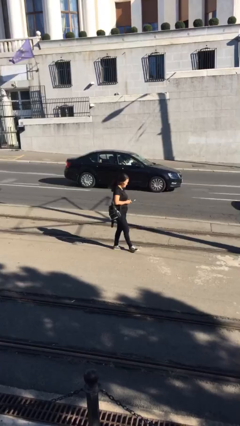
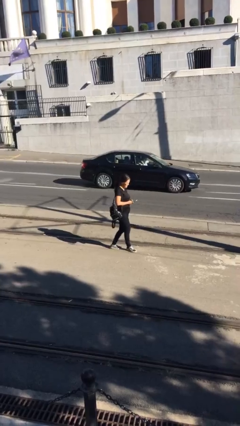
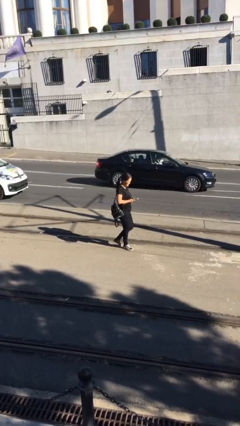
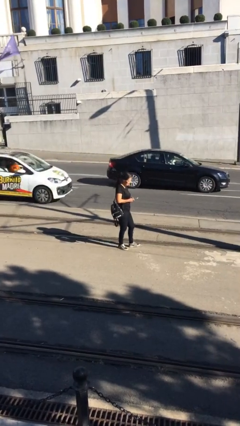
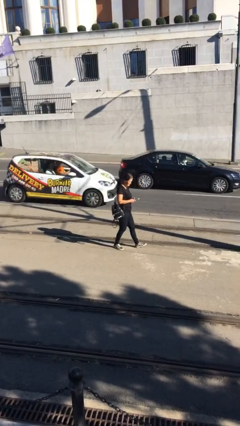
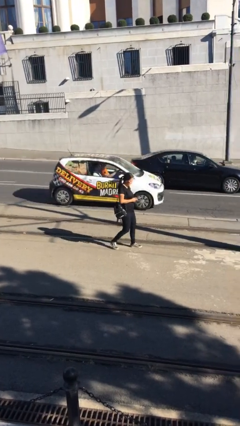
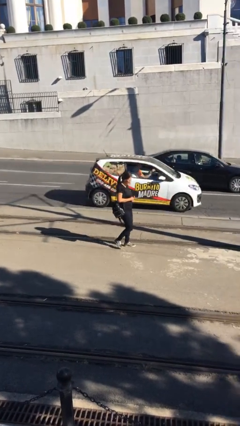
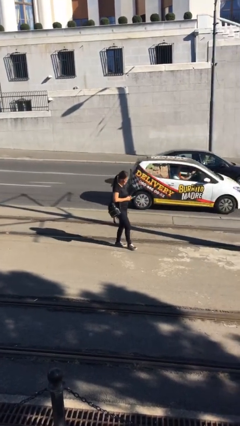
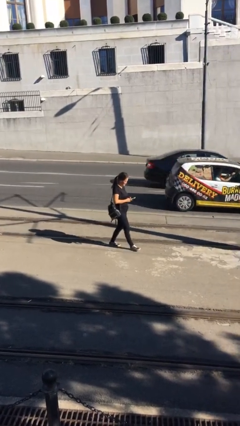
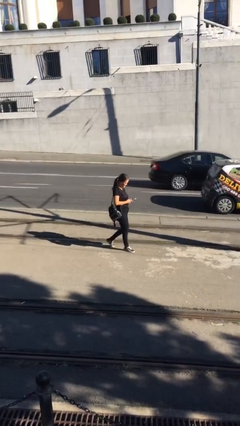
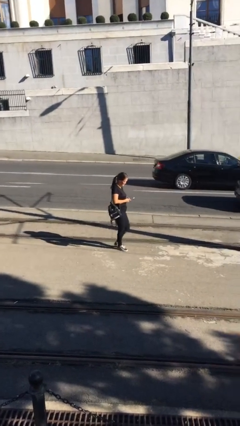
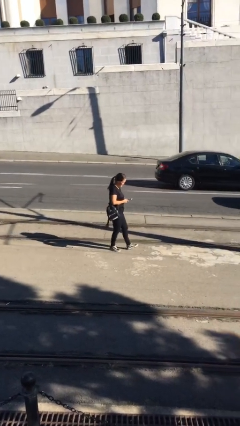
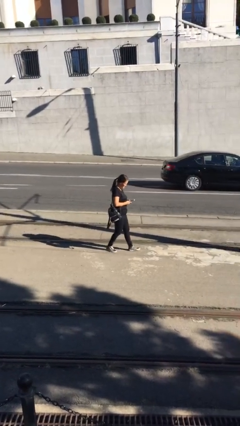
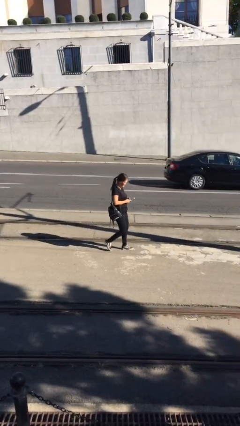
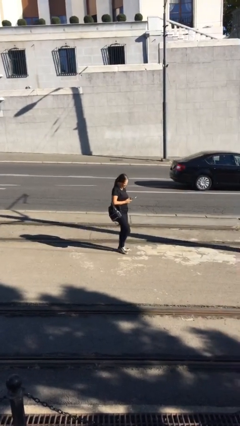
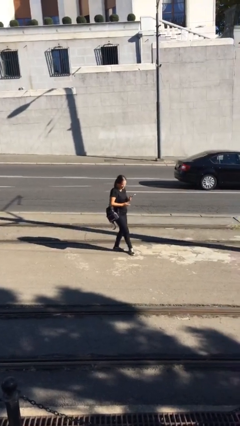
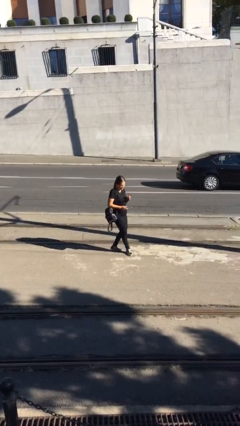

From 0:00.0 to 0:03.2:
person texts on phone

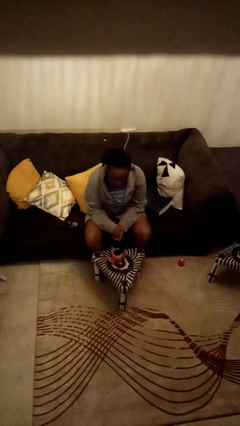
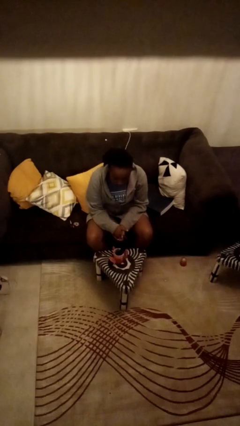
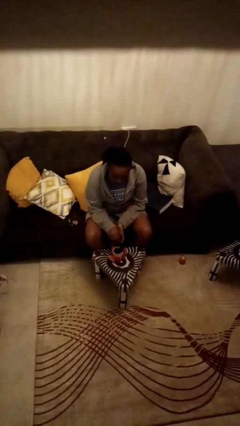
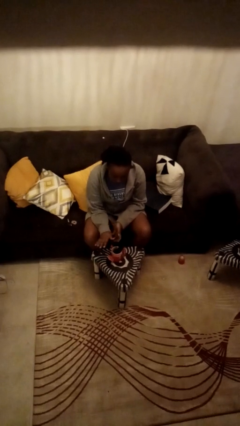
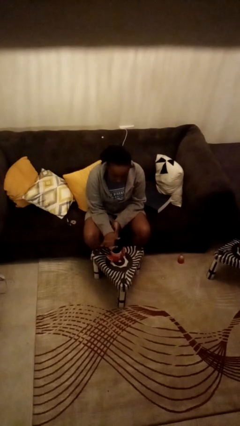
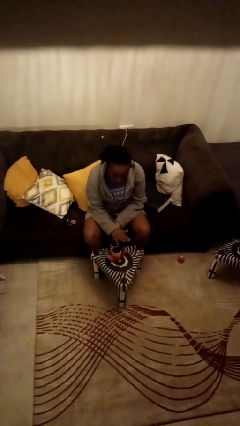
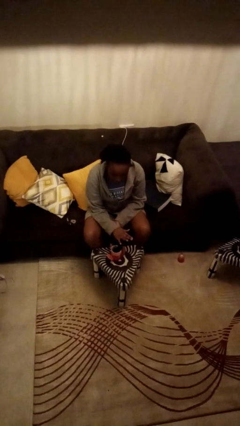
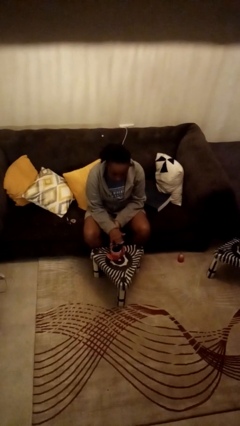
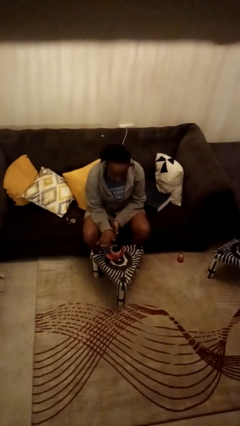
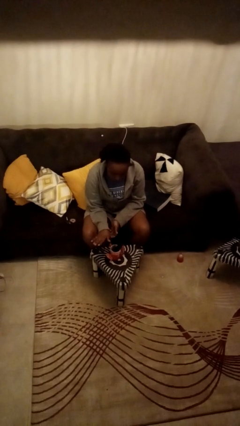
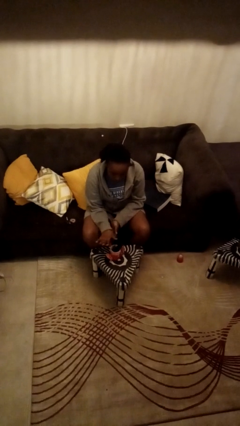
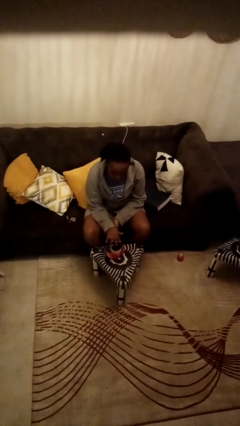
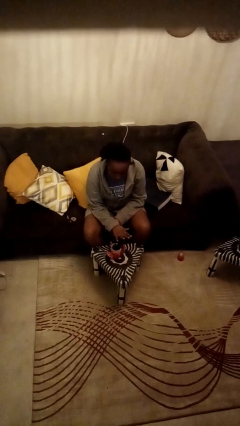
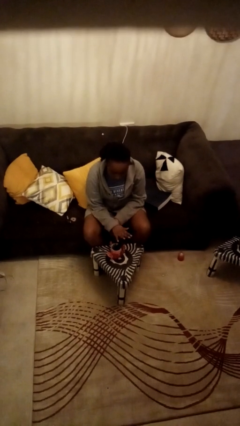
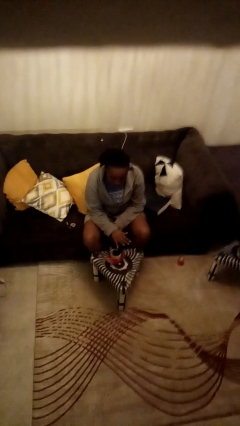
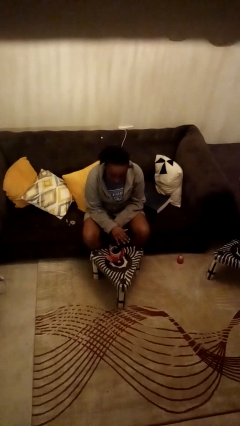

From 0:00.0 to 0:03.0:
person waves hand over object

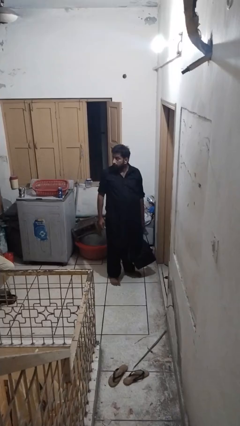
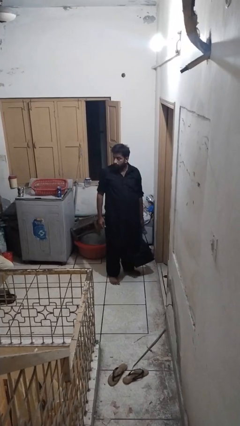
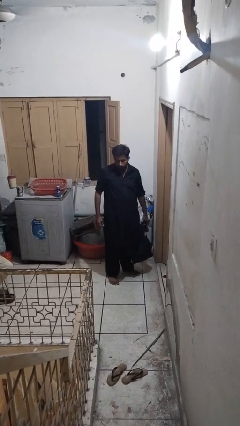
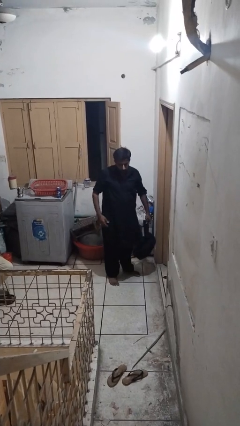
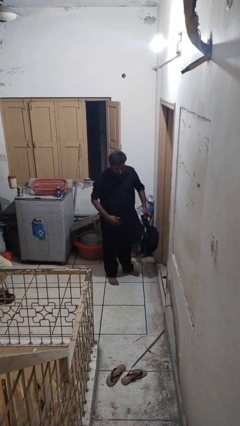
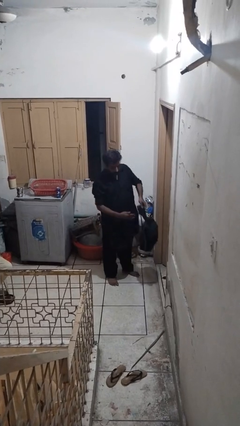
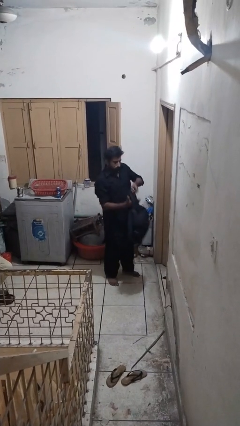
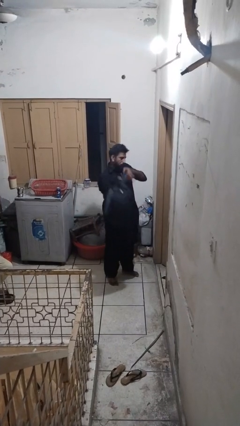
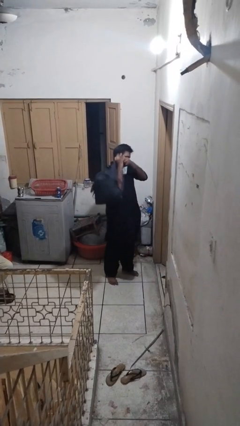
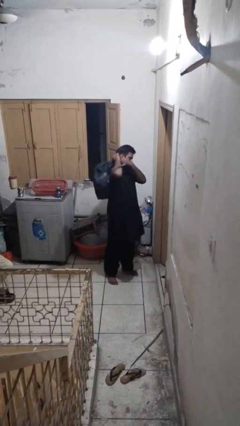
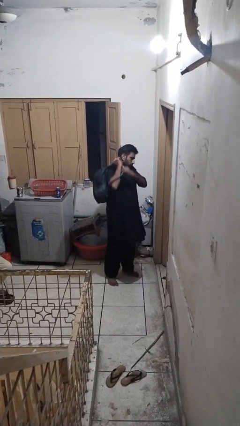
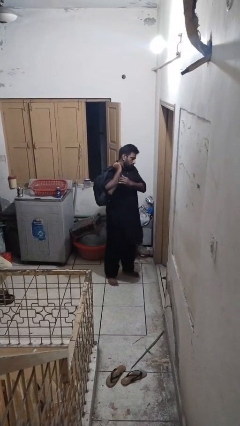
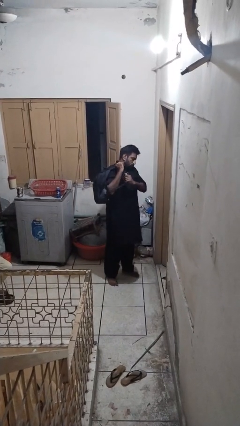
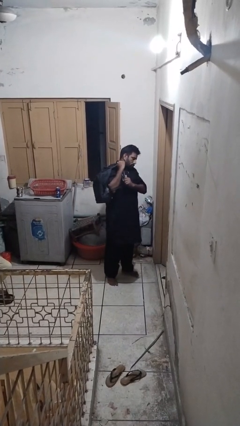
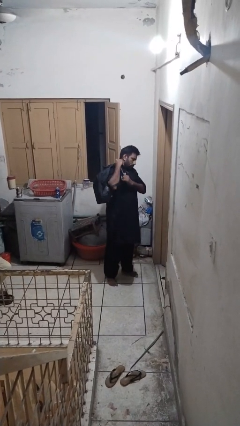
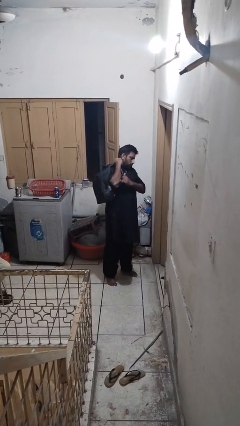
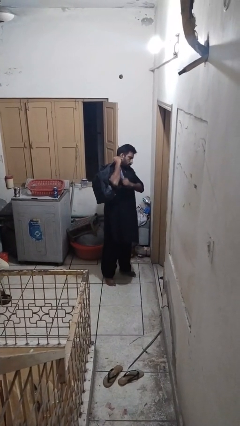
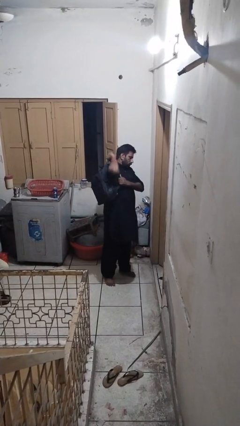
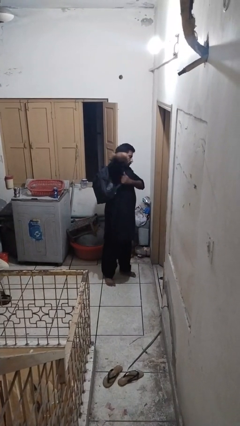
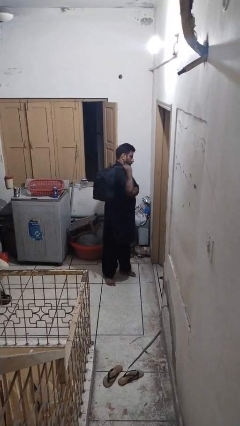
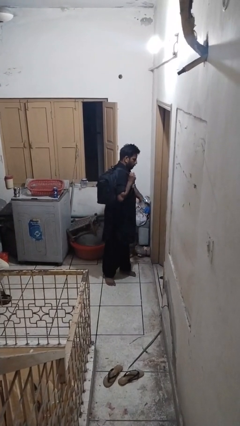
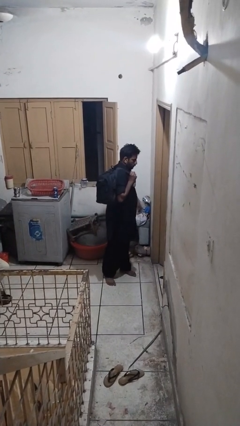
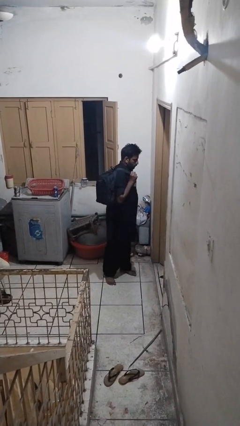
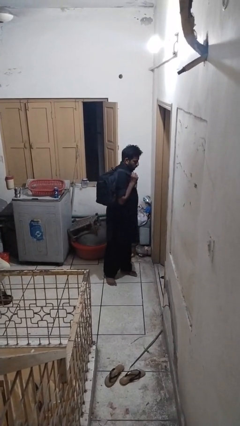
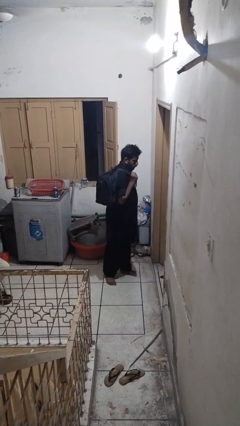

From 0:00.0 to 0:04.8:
person puts on backpack

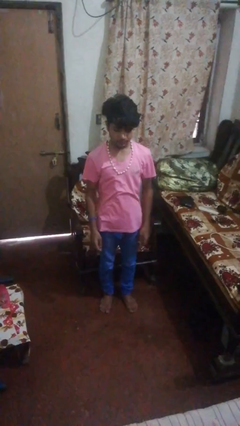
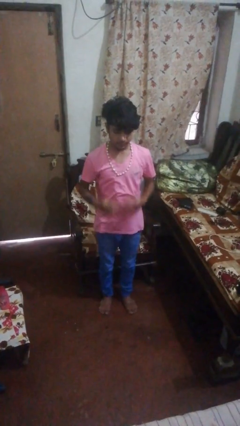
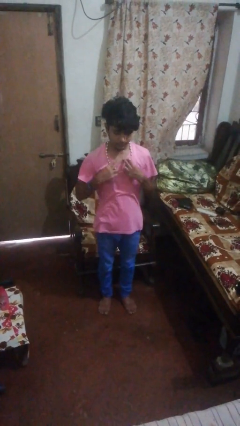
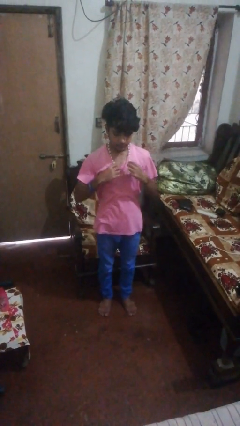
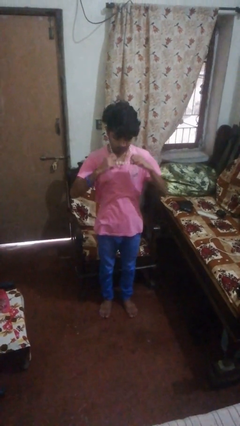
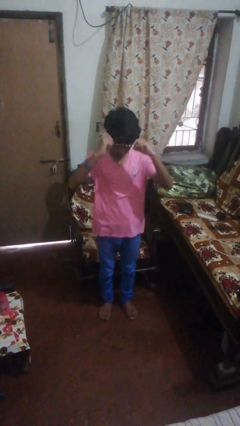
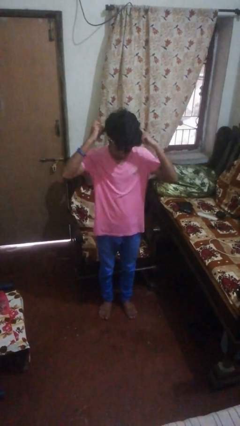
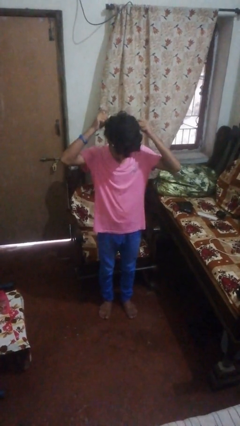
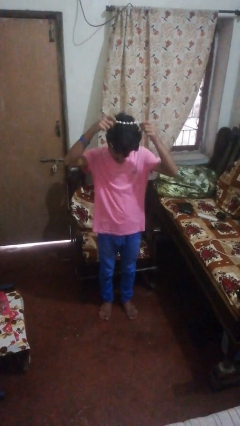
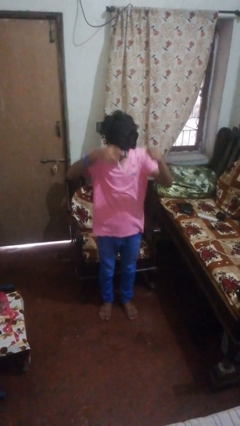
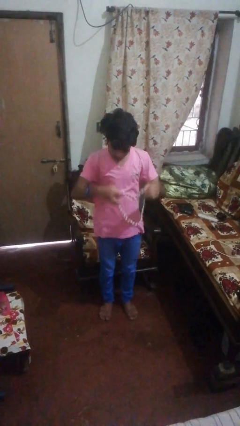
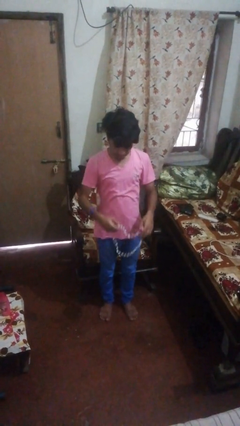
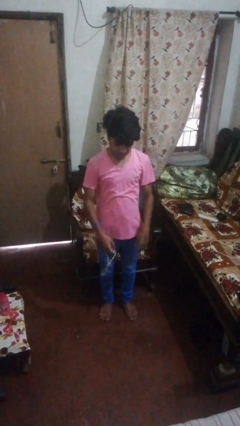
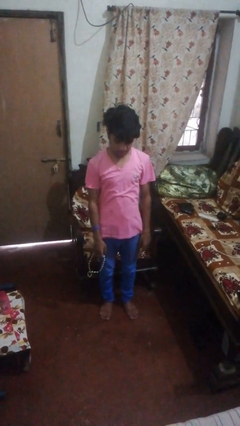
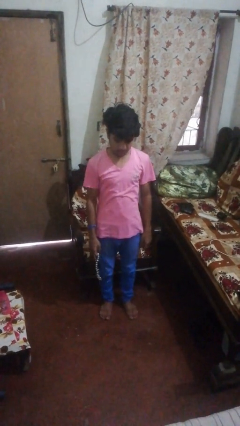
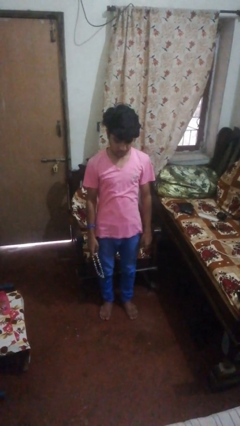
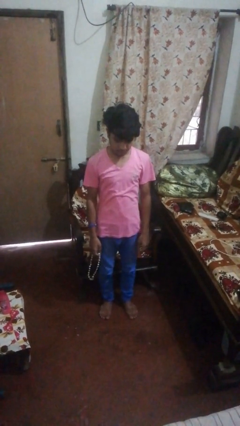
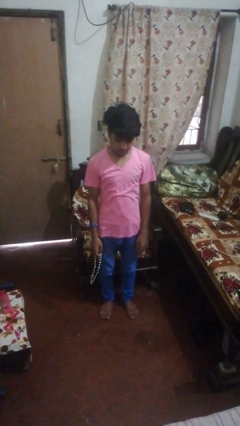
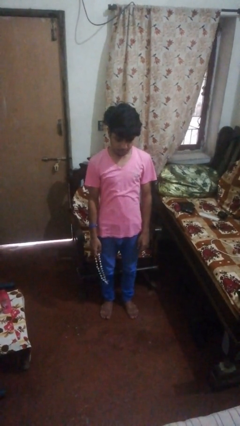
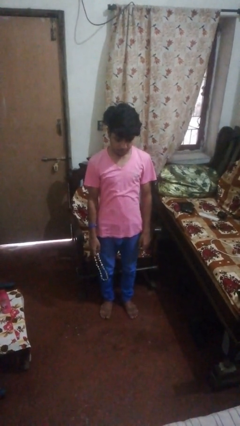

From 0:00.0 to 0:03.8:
person takes off necklace

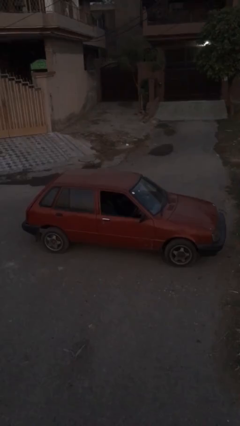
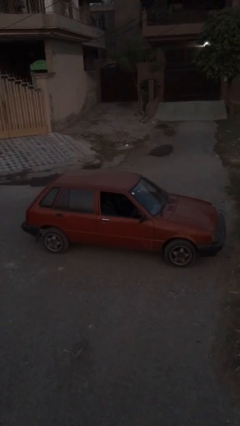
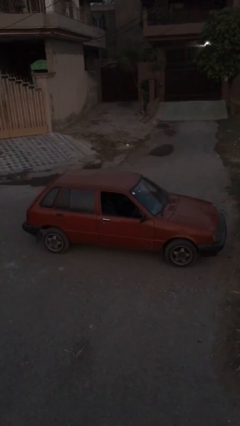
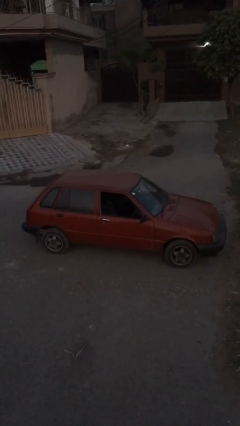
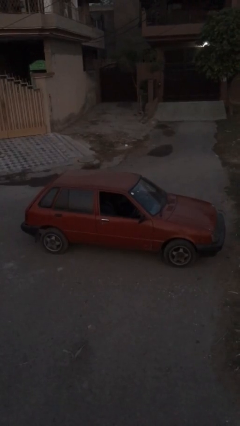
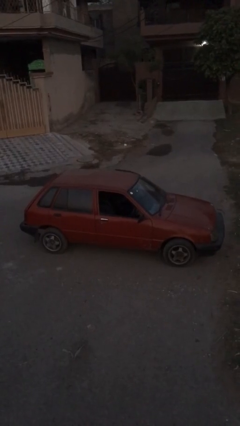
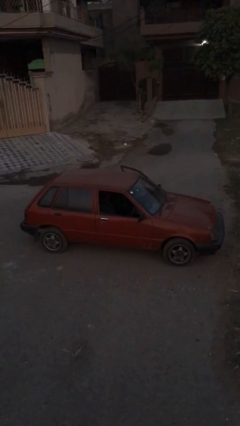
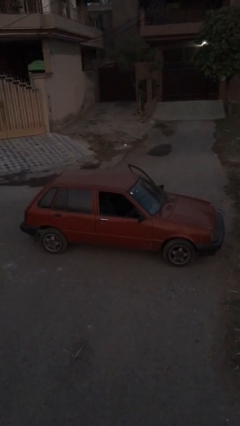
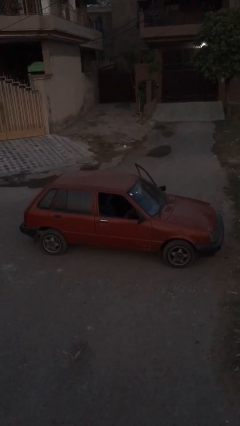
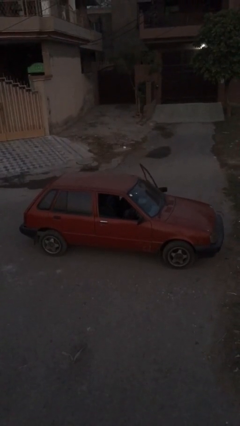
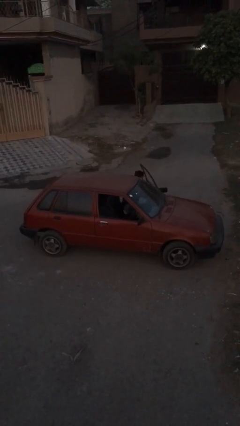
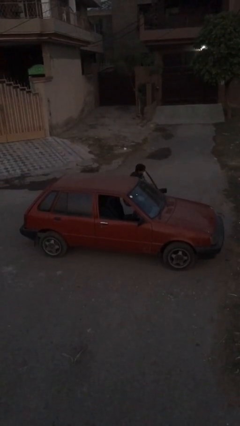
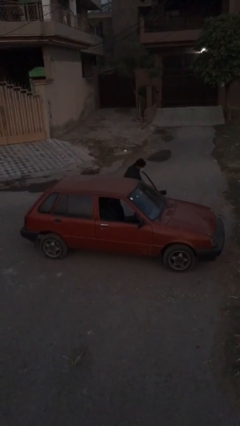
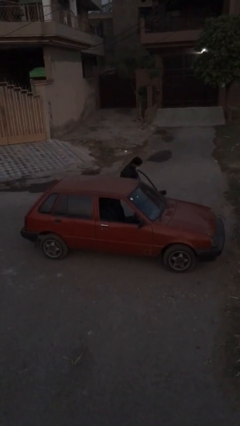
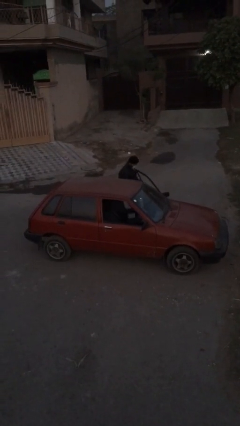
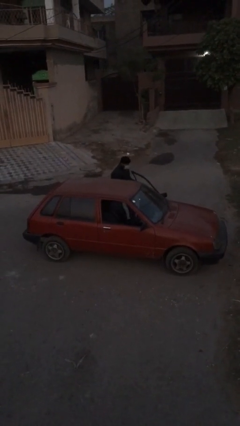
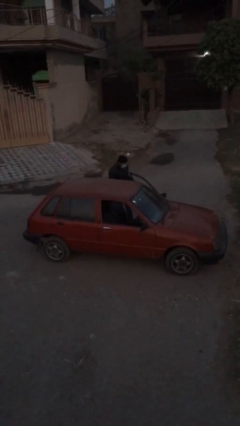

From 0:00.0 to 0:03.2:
car drops off person
